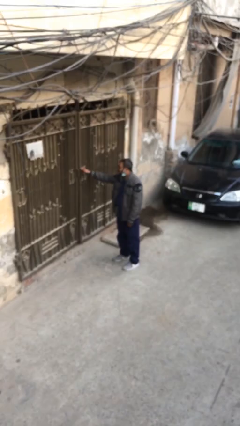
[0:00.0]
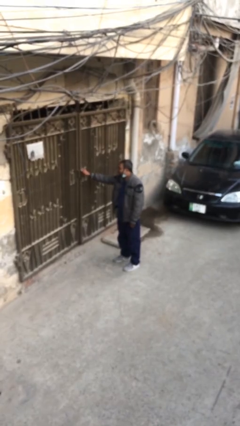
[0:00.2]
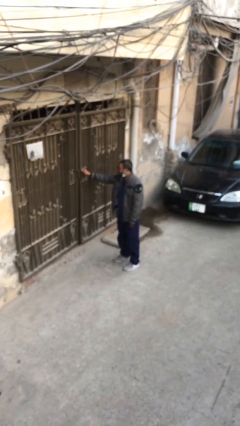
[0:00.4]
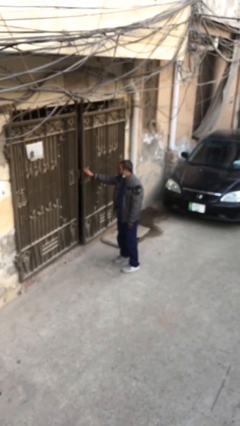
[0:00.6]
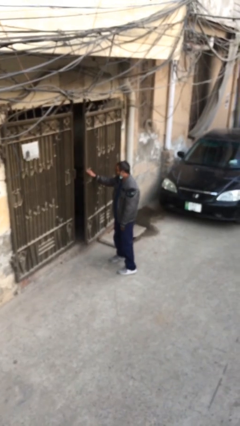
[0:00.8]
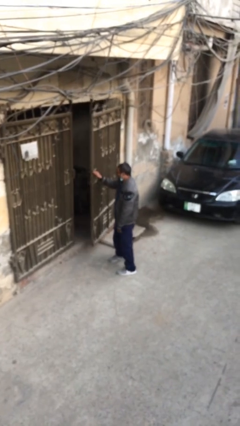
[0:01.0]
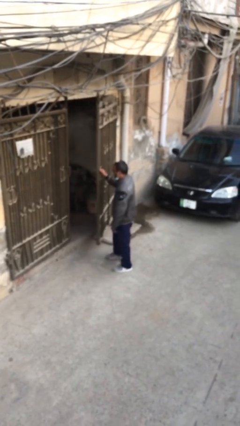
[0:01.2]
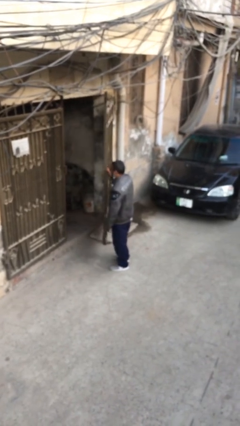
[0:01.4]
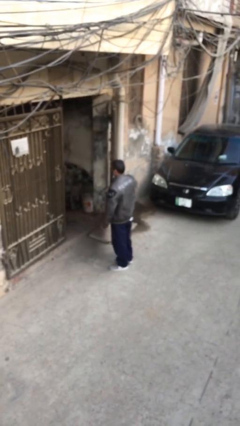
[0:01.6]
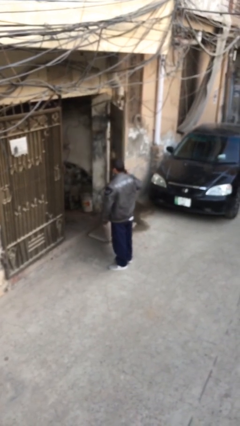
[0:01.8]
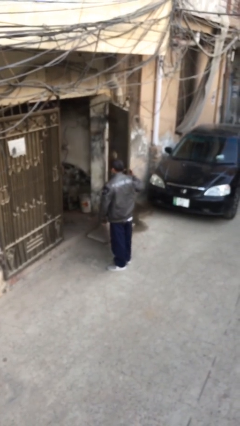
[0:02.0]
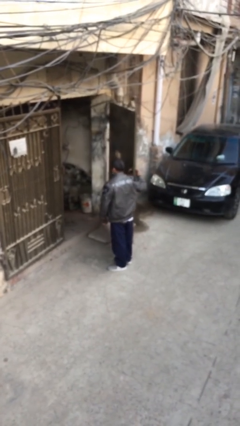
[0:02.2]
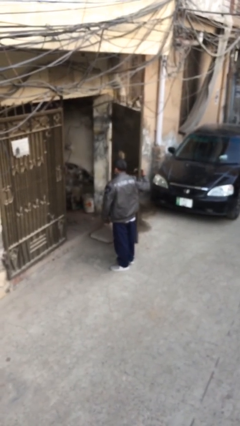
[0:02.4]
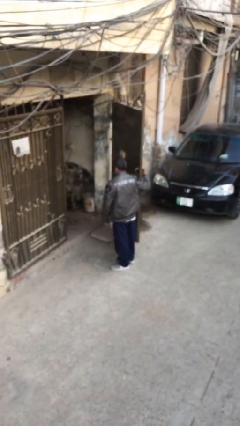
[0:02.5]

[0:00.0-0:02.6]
person opens facility door

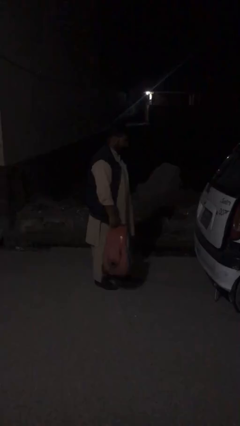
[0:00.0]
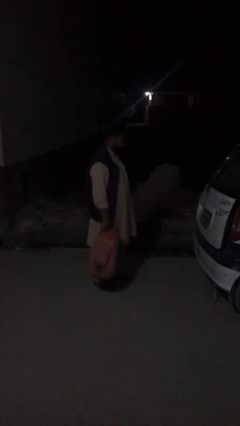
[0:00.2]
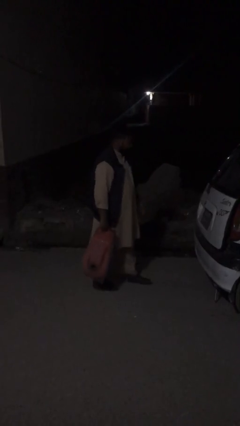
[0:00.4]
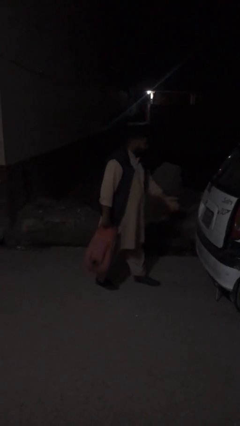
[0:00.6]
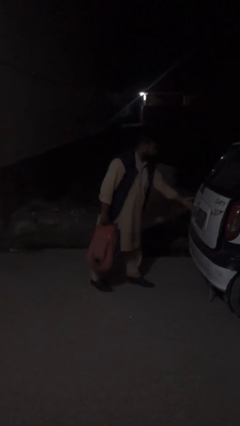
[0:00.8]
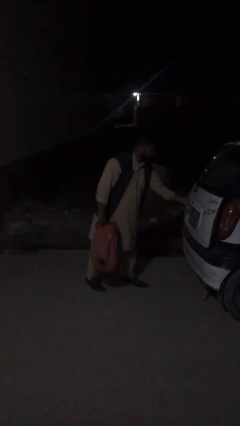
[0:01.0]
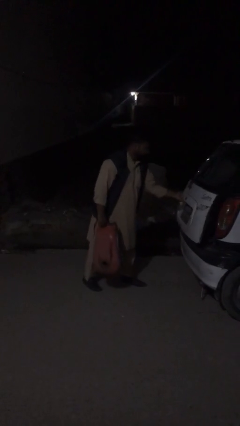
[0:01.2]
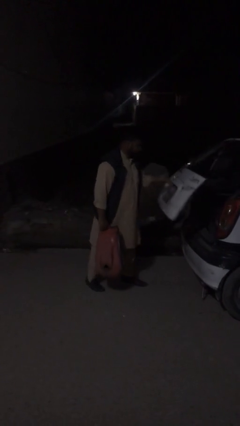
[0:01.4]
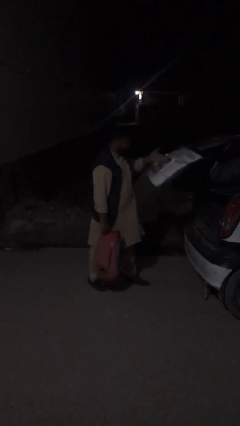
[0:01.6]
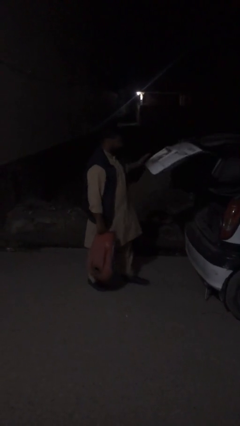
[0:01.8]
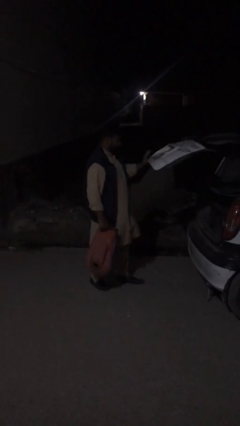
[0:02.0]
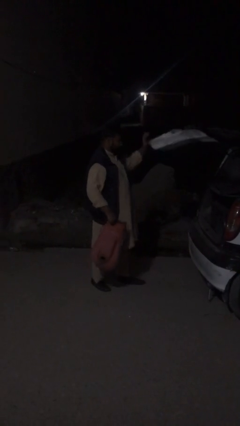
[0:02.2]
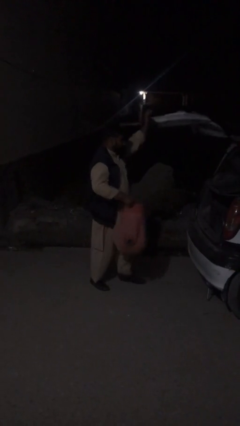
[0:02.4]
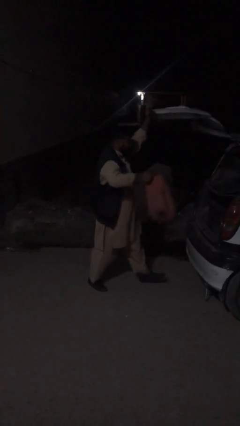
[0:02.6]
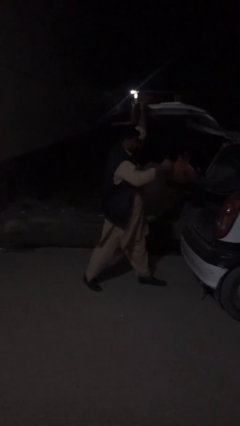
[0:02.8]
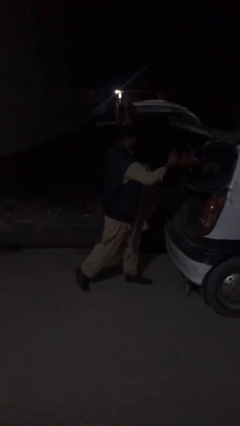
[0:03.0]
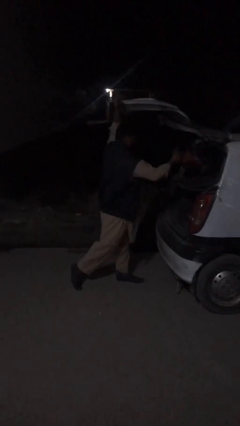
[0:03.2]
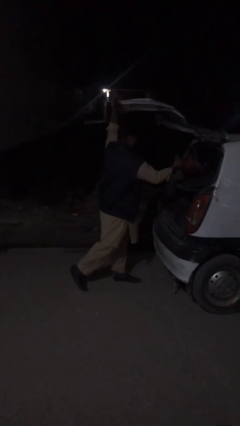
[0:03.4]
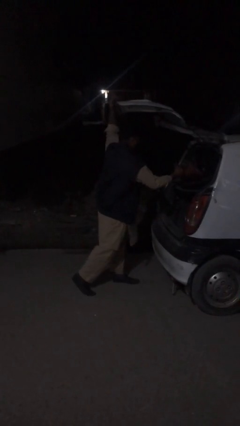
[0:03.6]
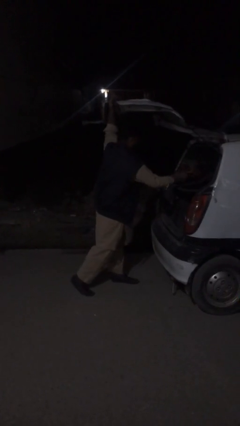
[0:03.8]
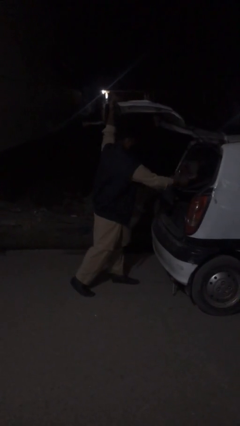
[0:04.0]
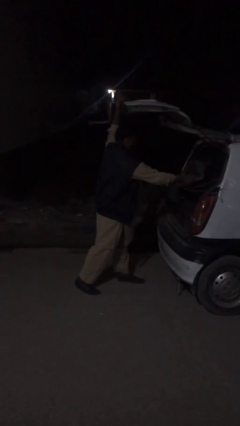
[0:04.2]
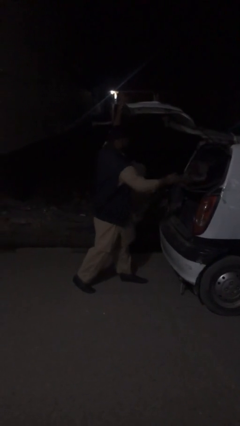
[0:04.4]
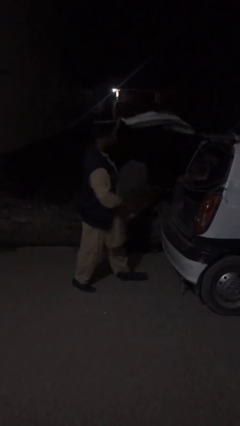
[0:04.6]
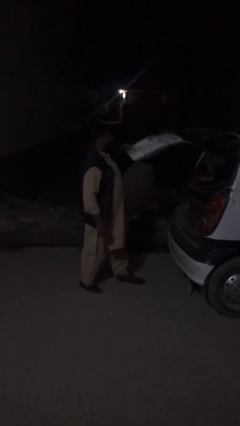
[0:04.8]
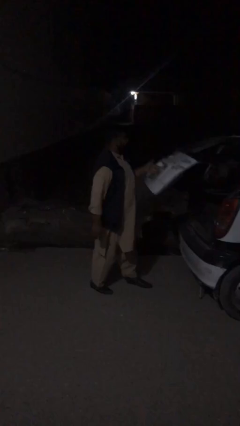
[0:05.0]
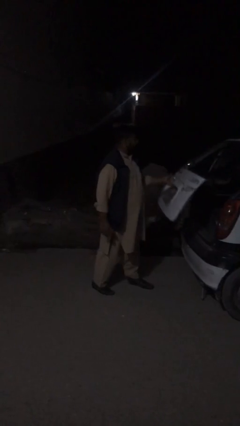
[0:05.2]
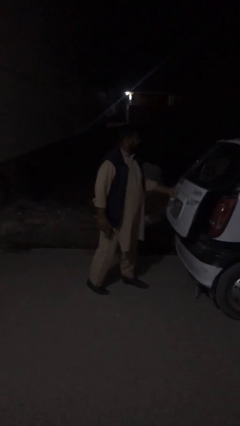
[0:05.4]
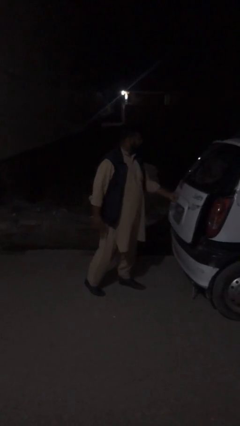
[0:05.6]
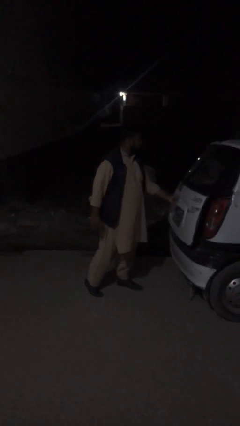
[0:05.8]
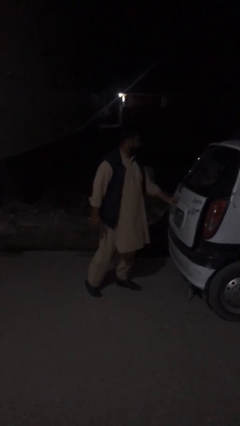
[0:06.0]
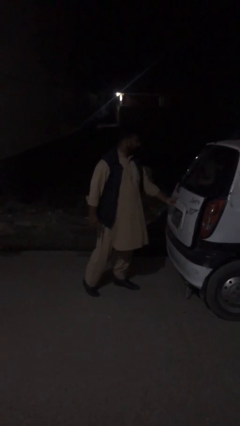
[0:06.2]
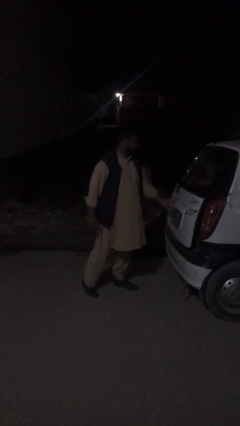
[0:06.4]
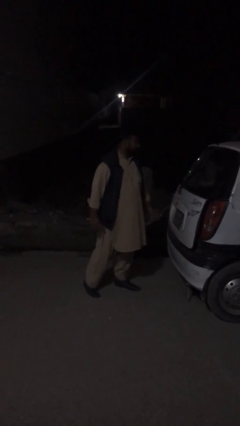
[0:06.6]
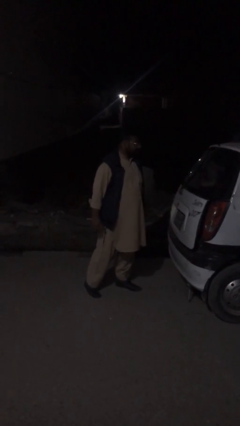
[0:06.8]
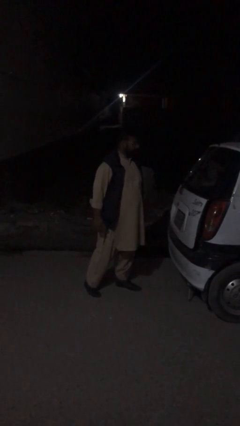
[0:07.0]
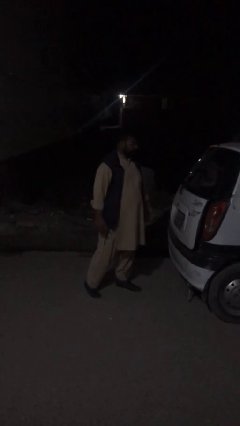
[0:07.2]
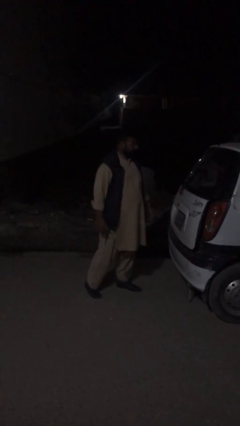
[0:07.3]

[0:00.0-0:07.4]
person loads car

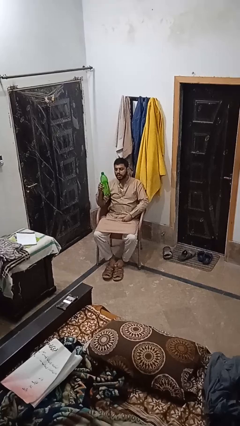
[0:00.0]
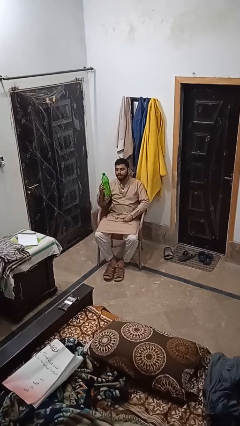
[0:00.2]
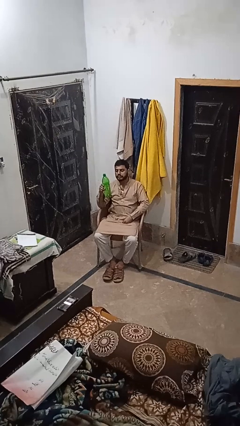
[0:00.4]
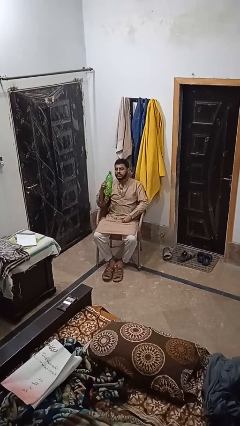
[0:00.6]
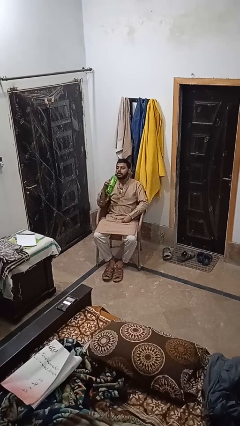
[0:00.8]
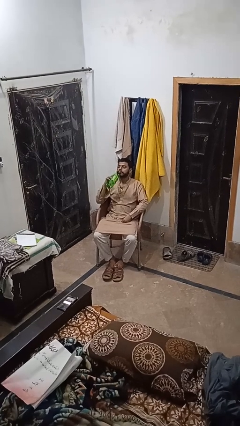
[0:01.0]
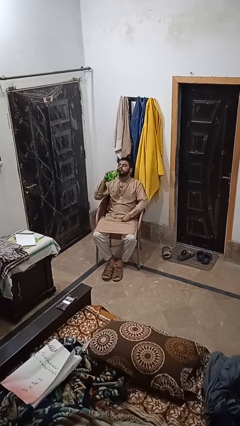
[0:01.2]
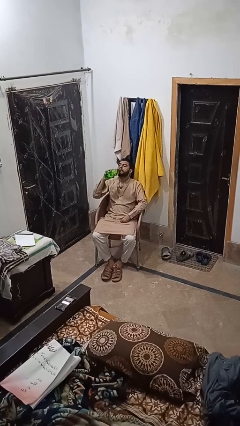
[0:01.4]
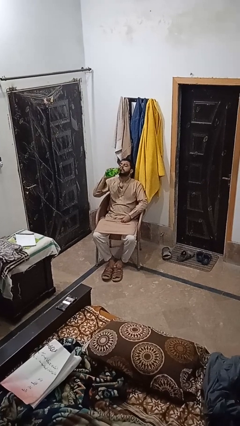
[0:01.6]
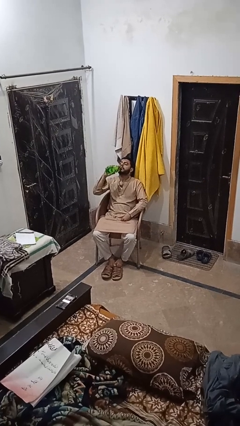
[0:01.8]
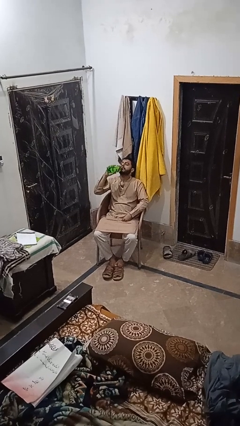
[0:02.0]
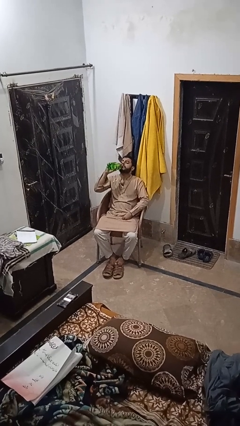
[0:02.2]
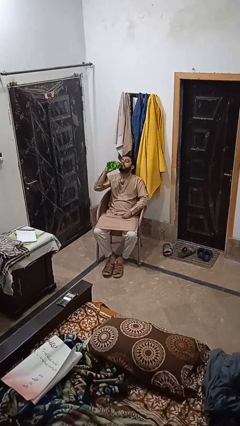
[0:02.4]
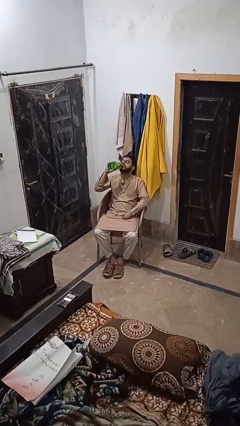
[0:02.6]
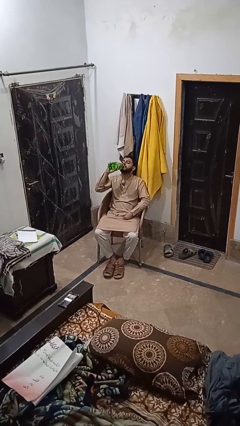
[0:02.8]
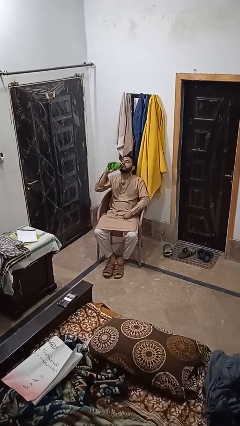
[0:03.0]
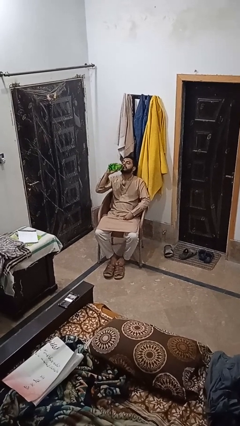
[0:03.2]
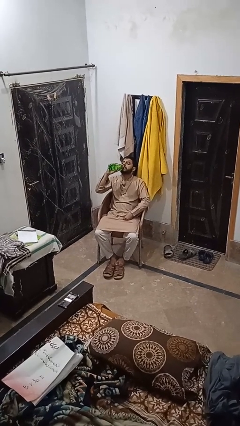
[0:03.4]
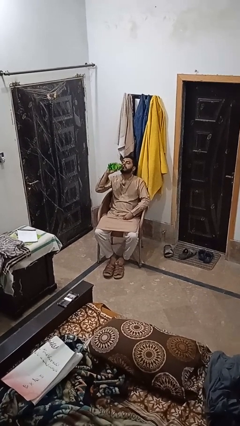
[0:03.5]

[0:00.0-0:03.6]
person drinks from bottle

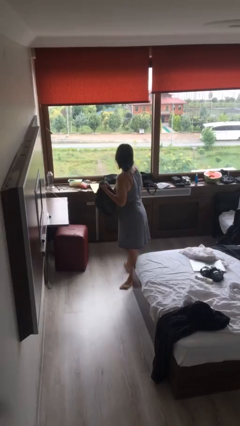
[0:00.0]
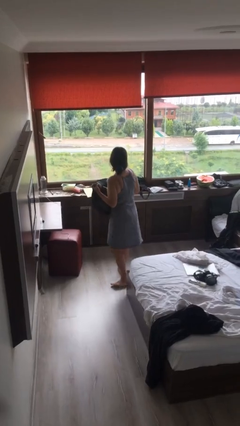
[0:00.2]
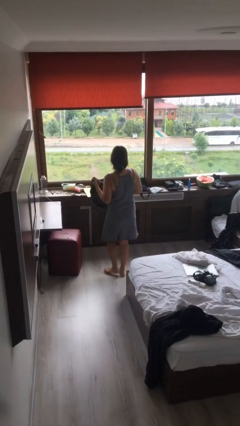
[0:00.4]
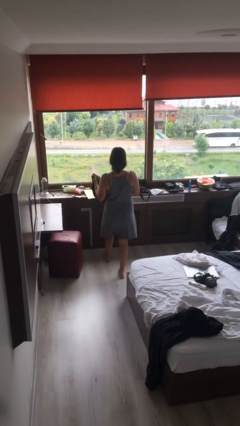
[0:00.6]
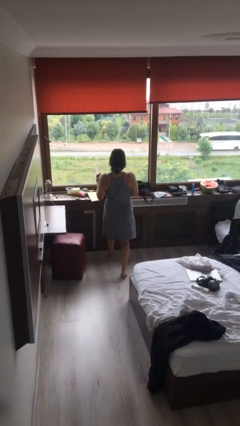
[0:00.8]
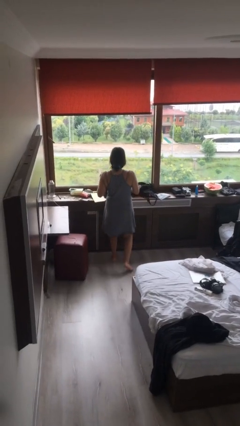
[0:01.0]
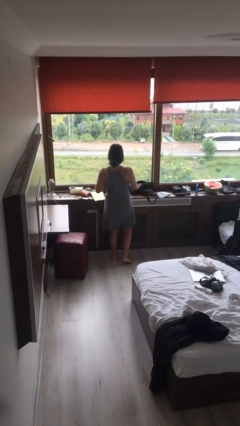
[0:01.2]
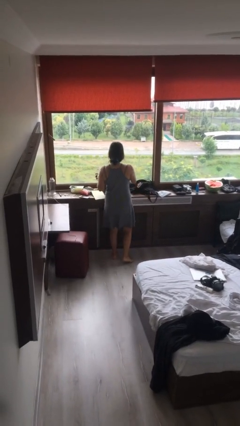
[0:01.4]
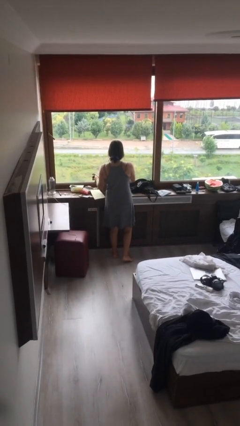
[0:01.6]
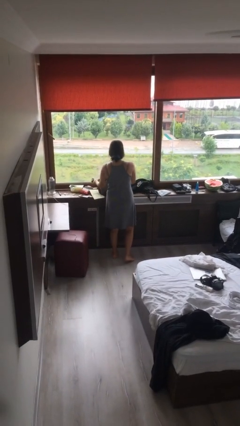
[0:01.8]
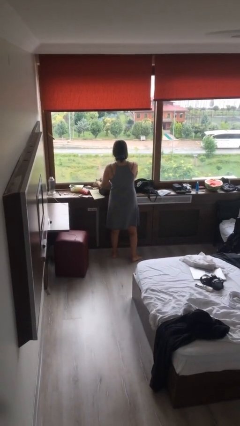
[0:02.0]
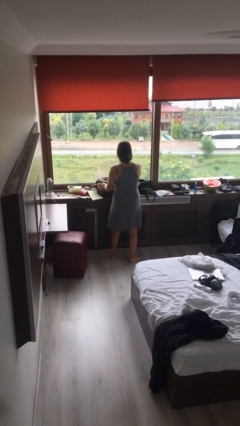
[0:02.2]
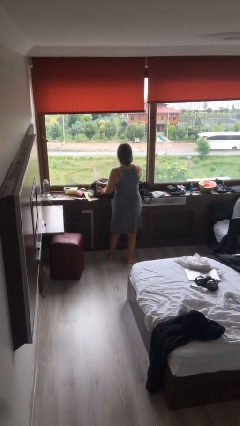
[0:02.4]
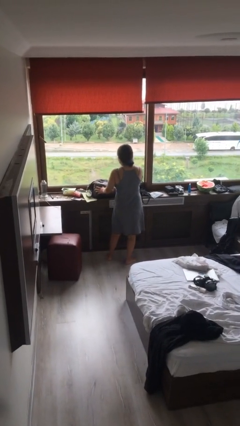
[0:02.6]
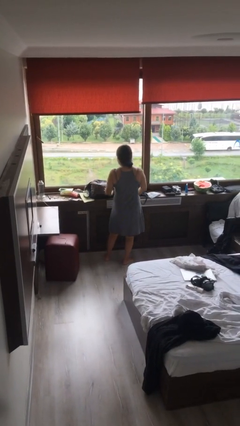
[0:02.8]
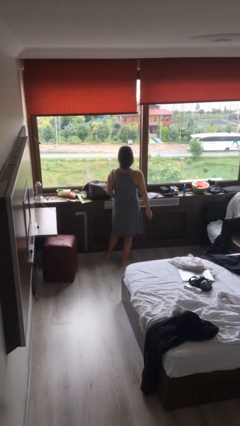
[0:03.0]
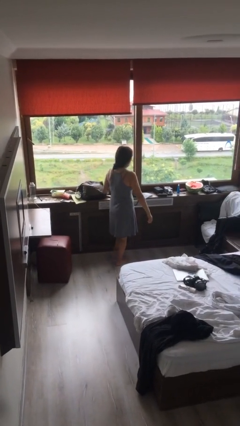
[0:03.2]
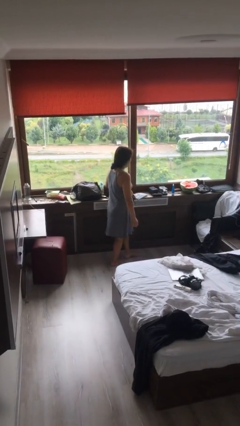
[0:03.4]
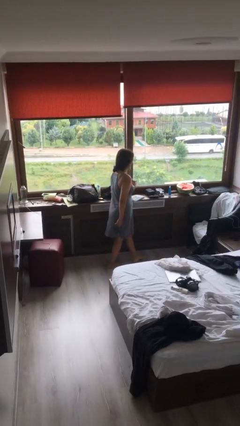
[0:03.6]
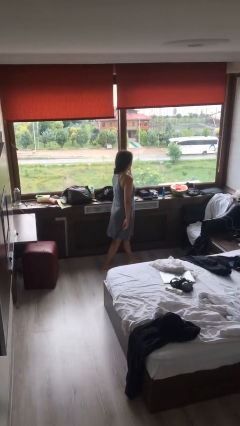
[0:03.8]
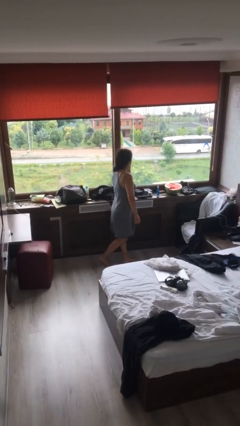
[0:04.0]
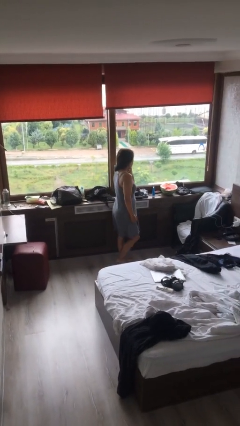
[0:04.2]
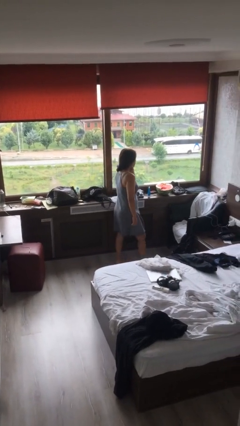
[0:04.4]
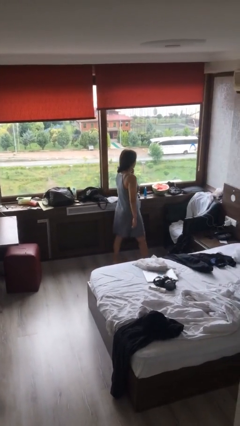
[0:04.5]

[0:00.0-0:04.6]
person puts down object on shelf
